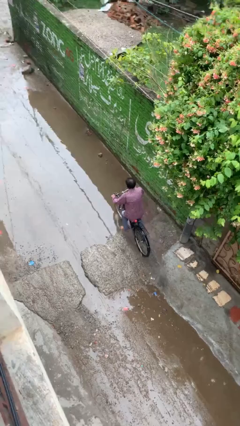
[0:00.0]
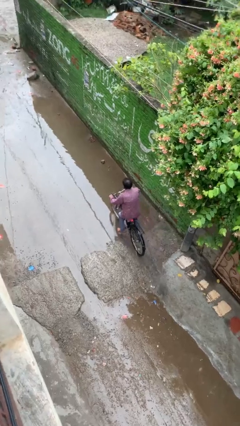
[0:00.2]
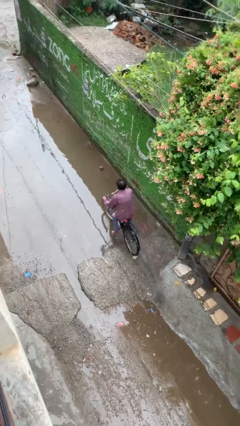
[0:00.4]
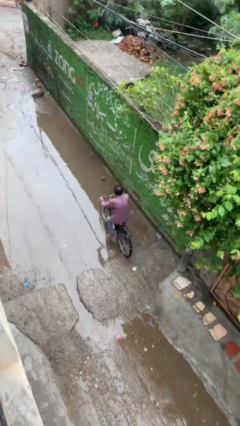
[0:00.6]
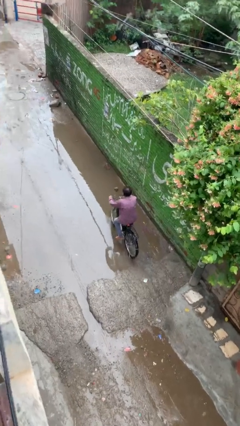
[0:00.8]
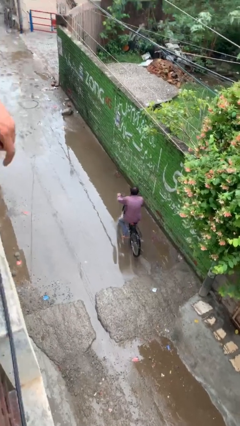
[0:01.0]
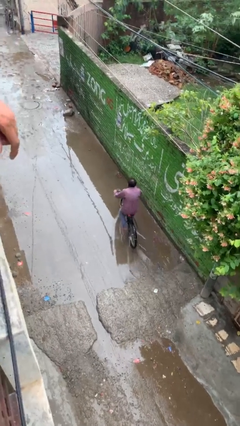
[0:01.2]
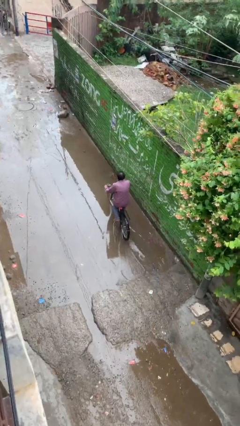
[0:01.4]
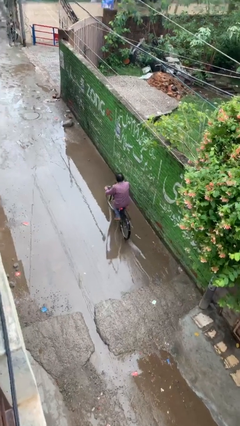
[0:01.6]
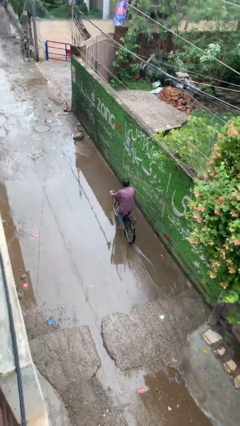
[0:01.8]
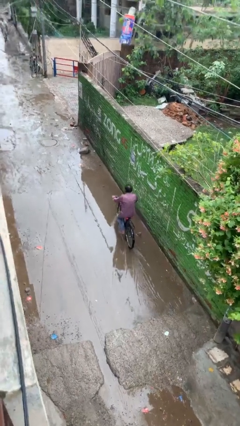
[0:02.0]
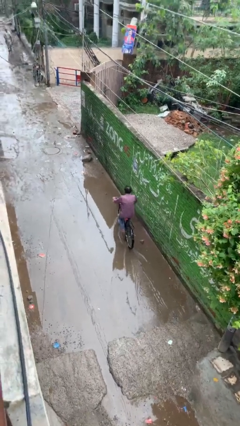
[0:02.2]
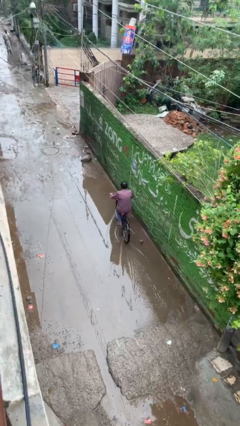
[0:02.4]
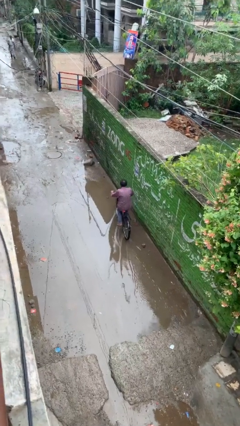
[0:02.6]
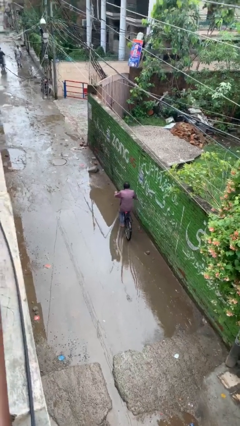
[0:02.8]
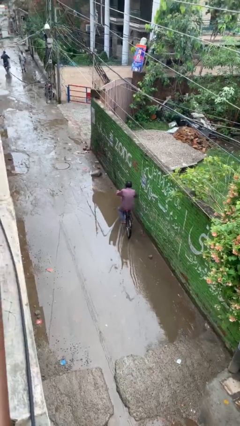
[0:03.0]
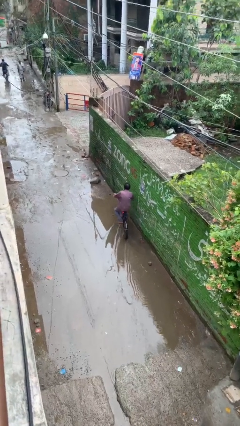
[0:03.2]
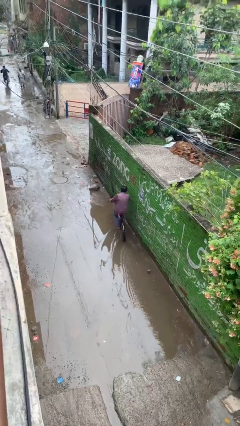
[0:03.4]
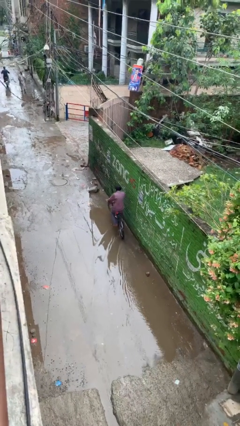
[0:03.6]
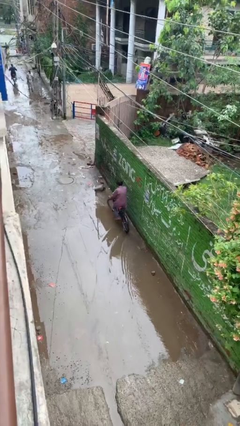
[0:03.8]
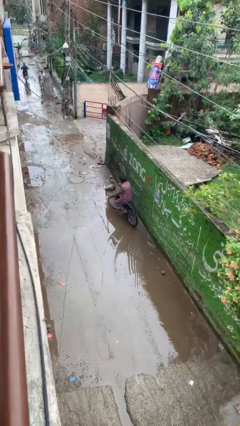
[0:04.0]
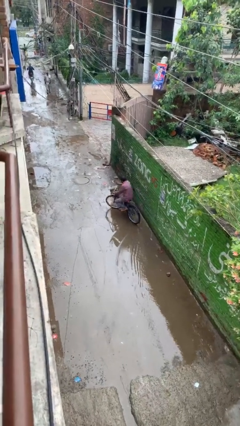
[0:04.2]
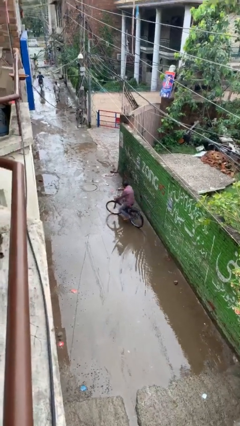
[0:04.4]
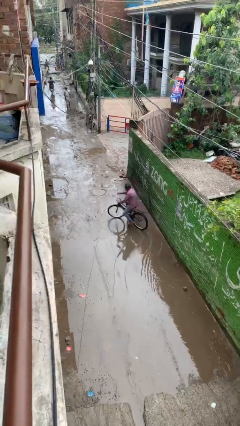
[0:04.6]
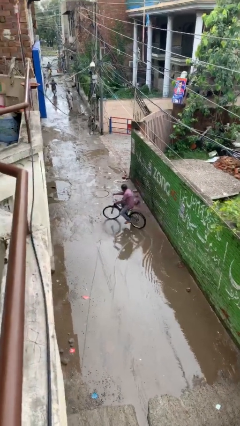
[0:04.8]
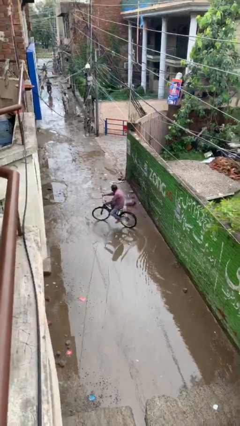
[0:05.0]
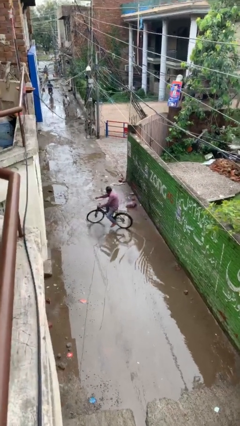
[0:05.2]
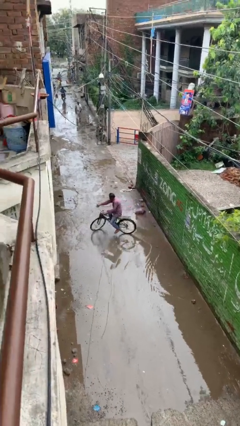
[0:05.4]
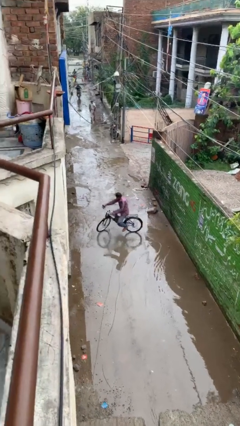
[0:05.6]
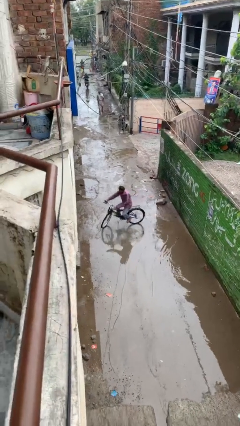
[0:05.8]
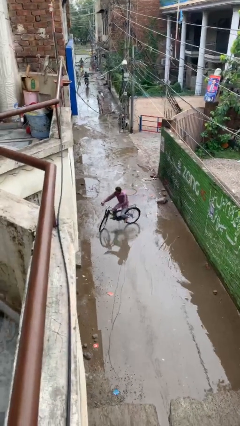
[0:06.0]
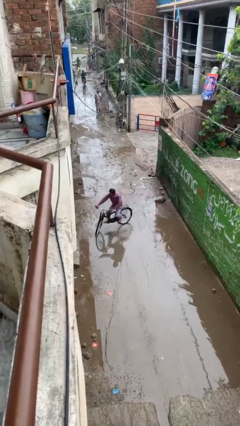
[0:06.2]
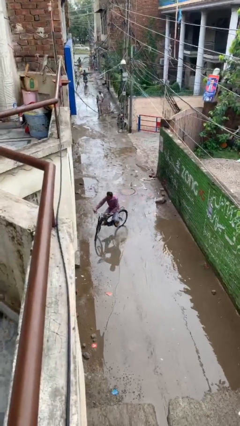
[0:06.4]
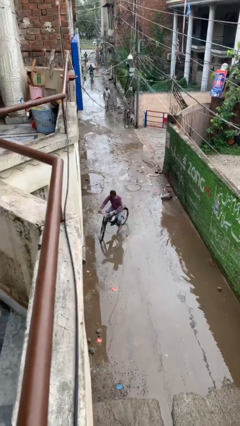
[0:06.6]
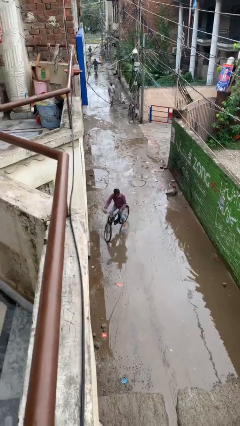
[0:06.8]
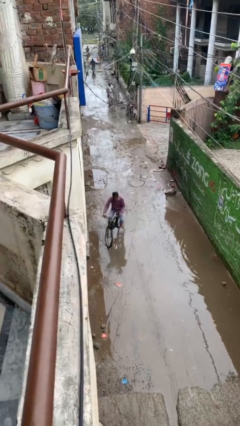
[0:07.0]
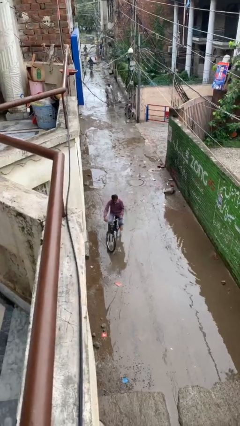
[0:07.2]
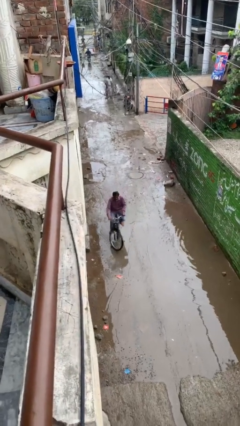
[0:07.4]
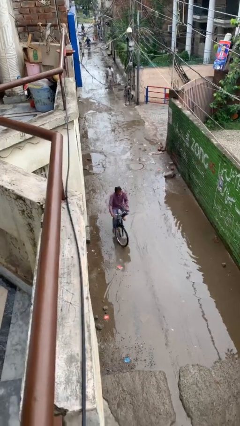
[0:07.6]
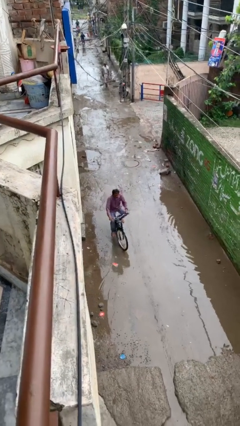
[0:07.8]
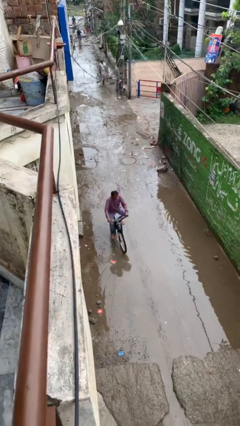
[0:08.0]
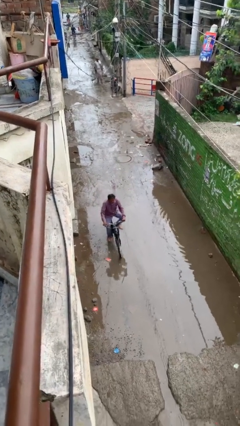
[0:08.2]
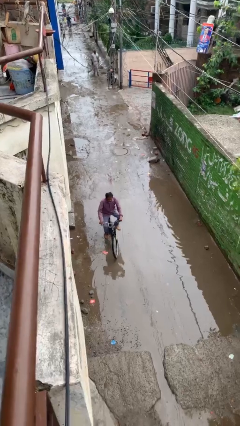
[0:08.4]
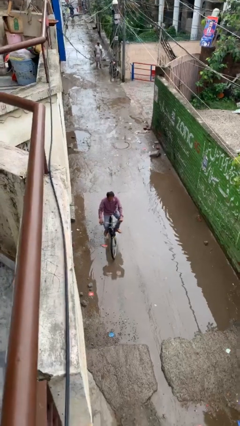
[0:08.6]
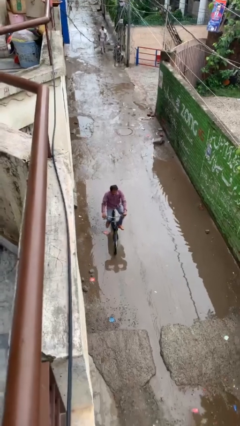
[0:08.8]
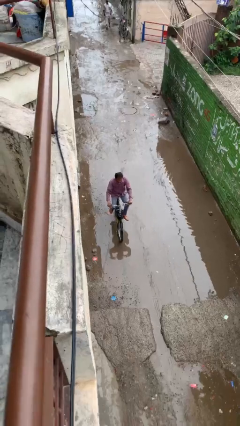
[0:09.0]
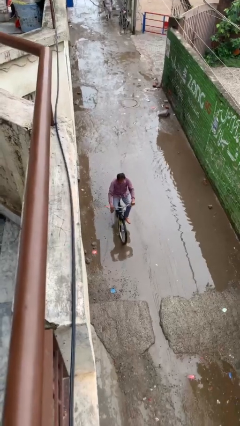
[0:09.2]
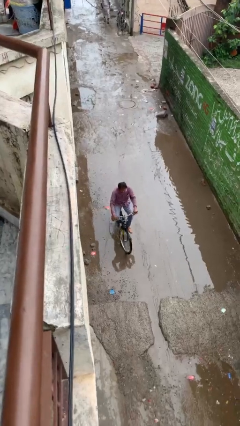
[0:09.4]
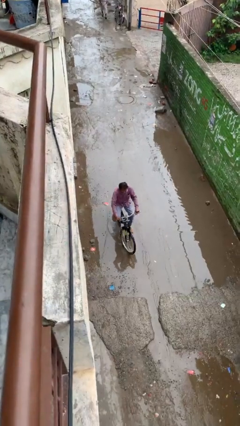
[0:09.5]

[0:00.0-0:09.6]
person rides bicycle

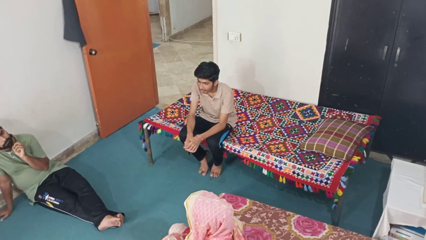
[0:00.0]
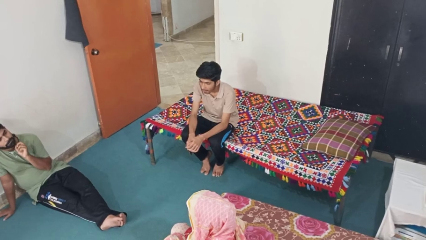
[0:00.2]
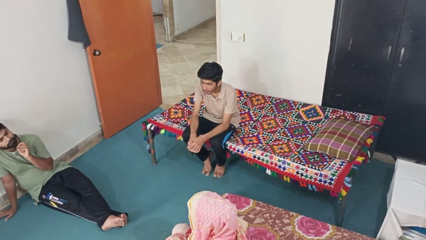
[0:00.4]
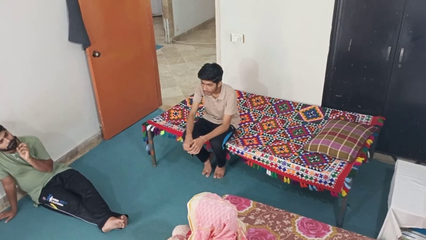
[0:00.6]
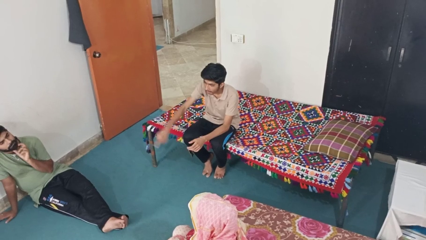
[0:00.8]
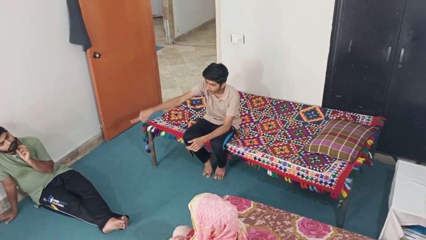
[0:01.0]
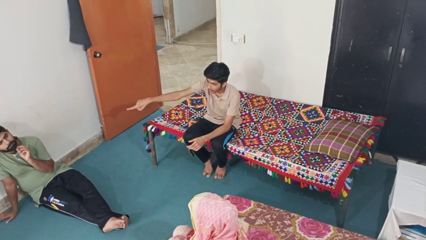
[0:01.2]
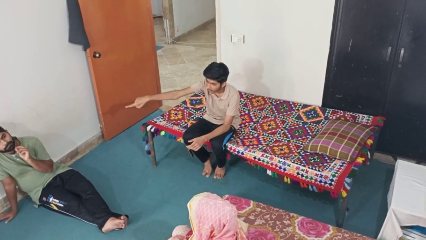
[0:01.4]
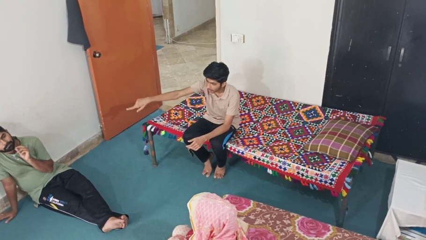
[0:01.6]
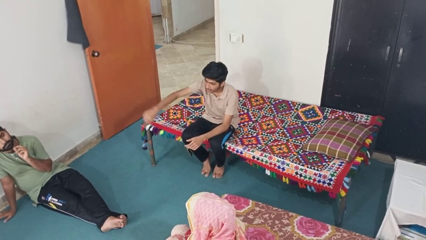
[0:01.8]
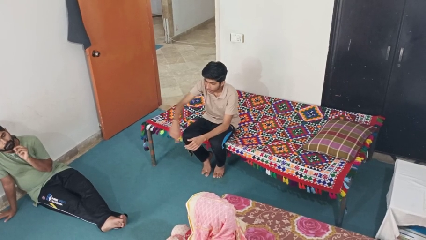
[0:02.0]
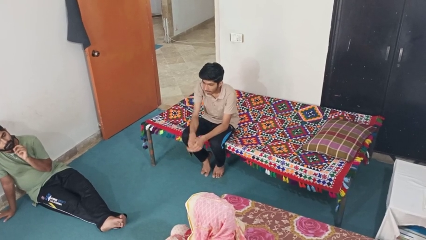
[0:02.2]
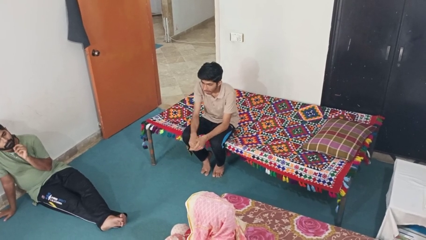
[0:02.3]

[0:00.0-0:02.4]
person points at person

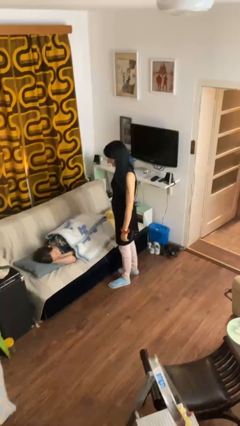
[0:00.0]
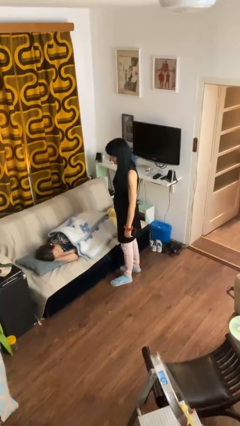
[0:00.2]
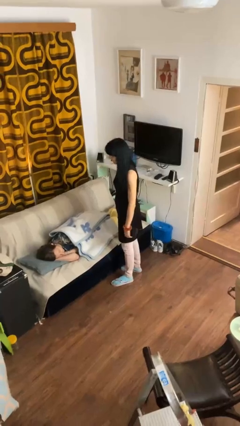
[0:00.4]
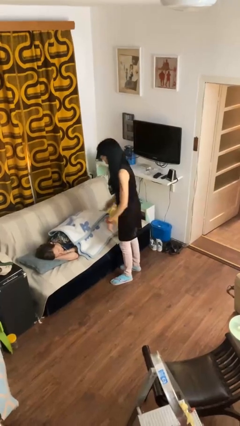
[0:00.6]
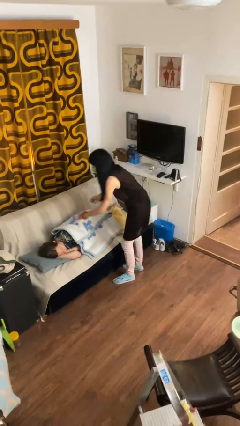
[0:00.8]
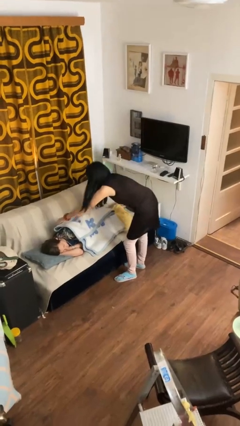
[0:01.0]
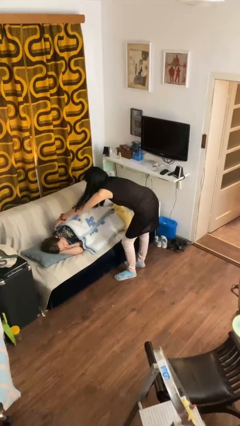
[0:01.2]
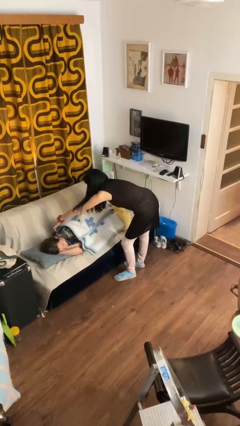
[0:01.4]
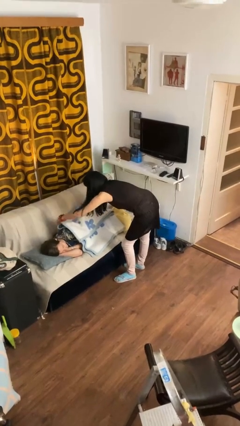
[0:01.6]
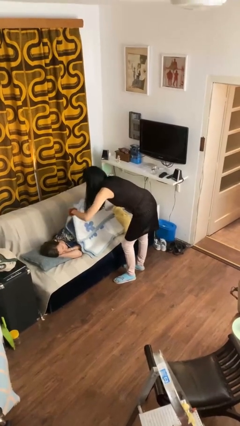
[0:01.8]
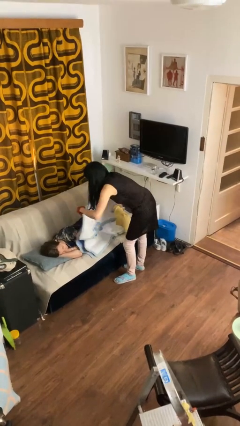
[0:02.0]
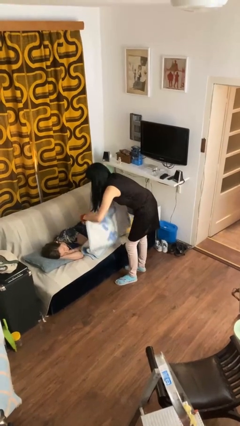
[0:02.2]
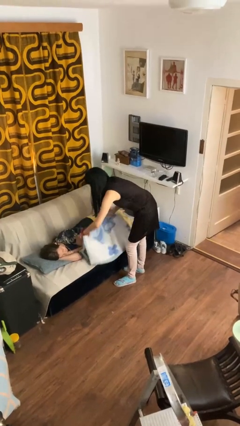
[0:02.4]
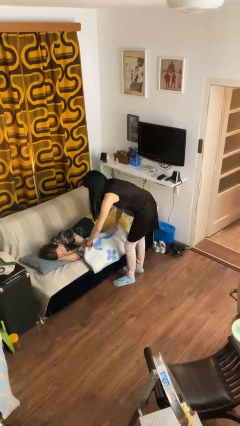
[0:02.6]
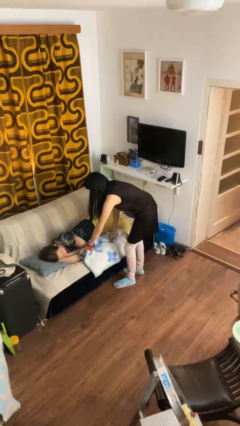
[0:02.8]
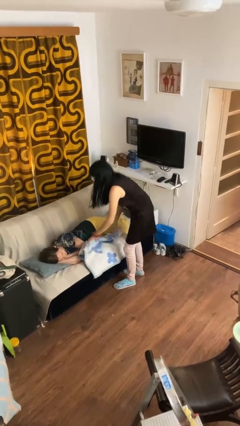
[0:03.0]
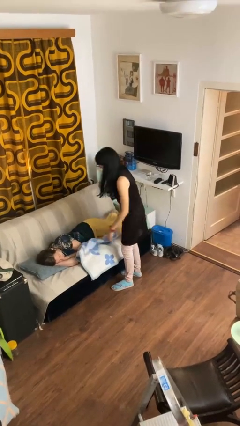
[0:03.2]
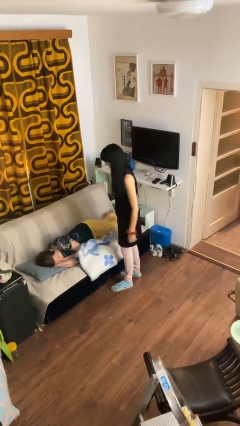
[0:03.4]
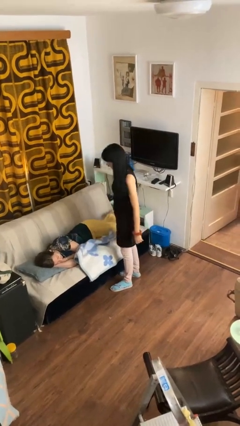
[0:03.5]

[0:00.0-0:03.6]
person uncovers friend with blanket

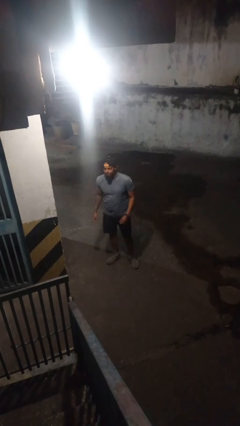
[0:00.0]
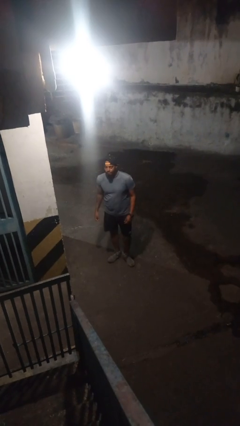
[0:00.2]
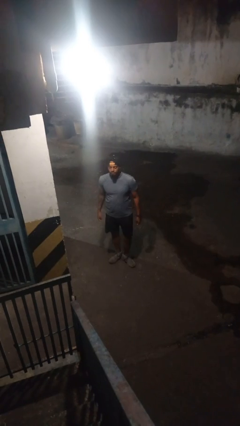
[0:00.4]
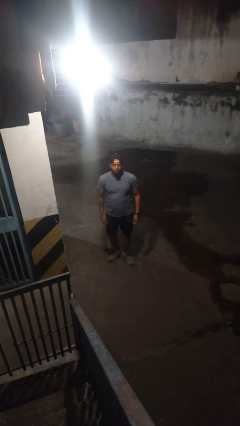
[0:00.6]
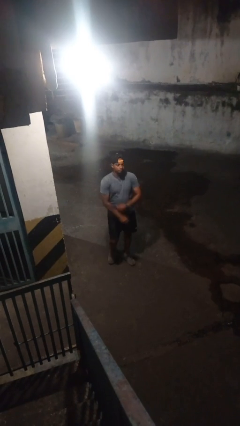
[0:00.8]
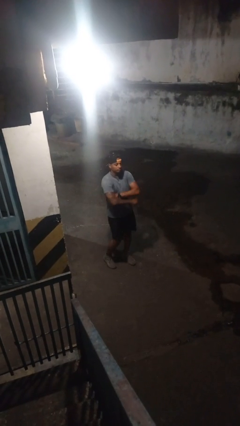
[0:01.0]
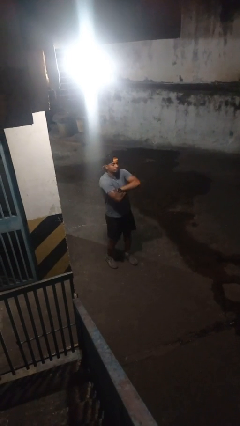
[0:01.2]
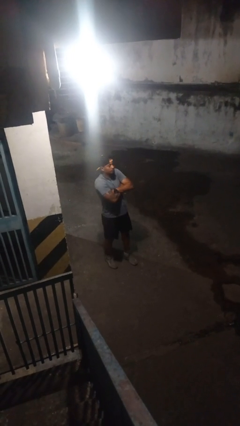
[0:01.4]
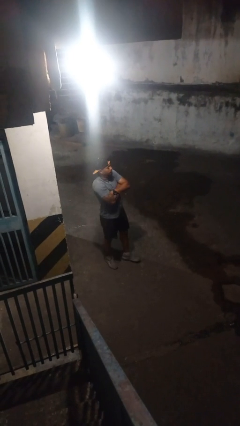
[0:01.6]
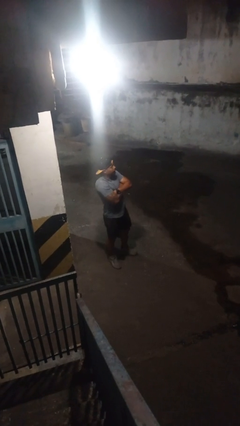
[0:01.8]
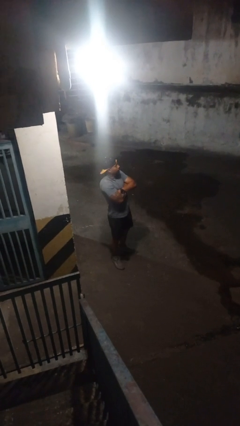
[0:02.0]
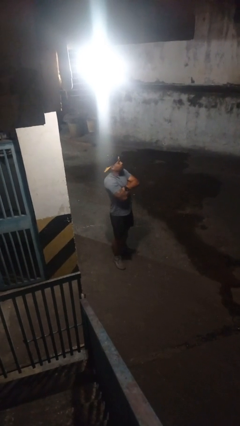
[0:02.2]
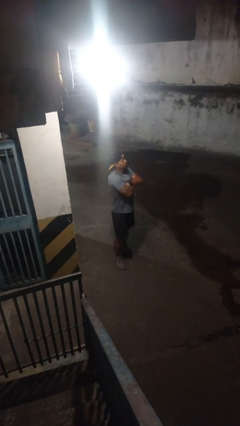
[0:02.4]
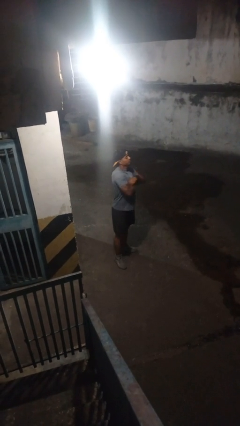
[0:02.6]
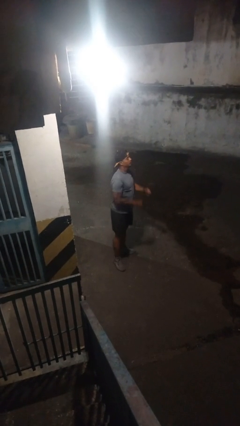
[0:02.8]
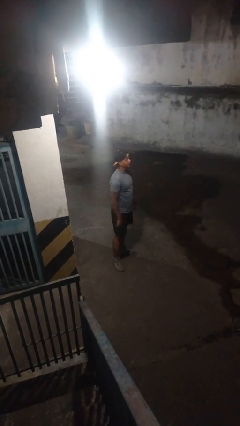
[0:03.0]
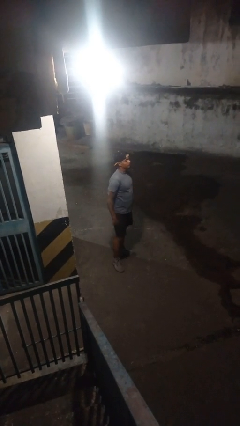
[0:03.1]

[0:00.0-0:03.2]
person crosses arms
